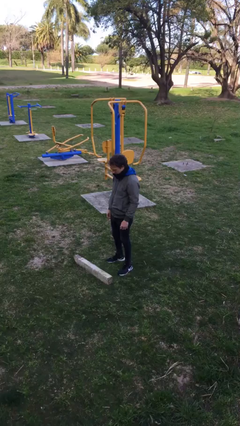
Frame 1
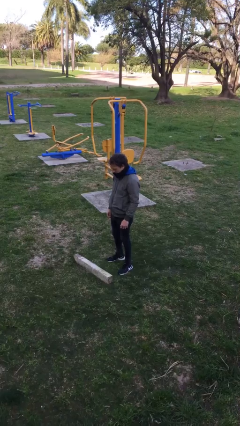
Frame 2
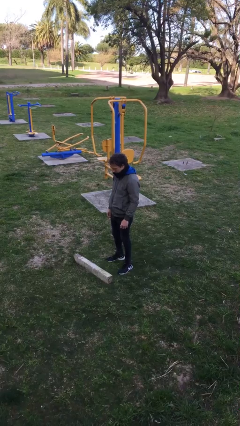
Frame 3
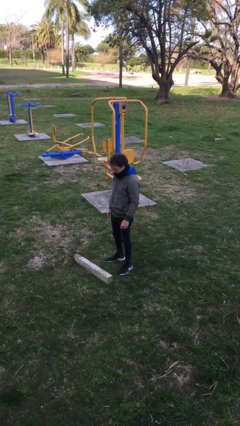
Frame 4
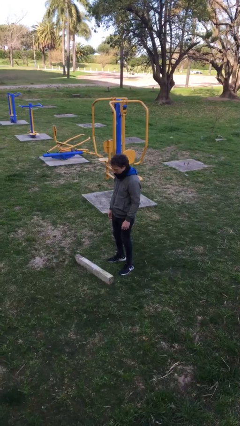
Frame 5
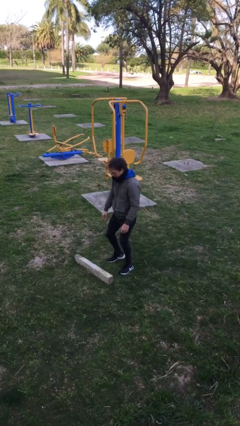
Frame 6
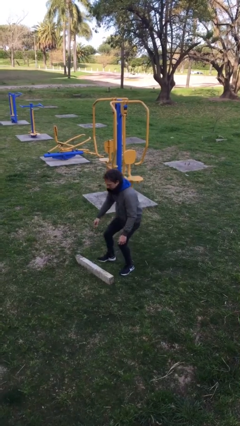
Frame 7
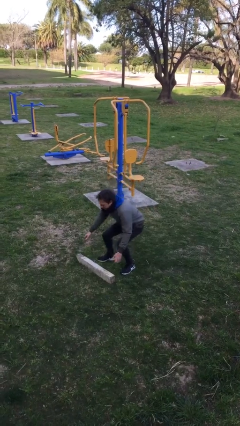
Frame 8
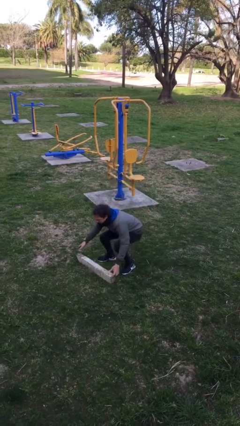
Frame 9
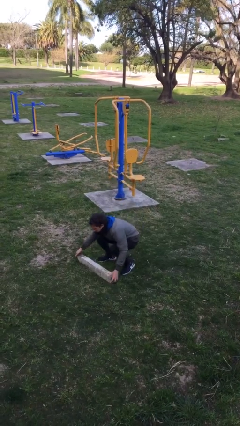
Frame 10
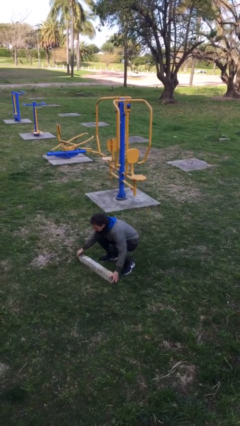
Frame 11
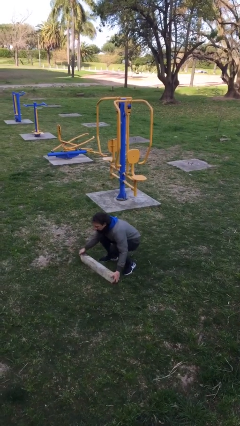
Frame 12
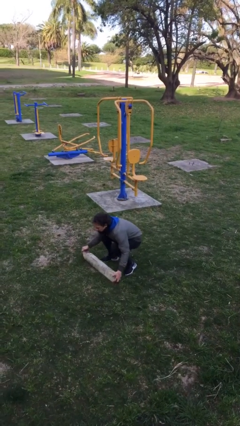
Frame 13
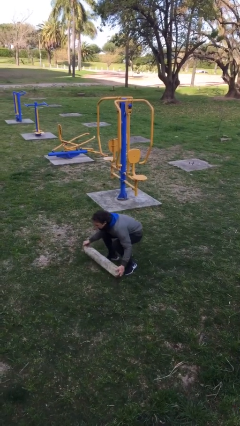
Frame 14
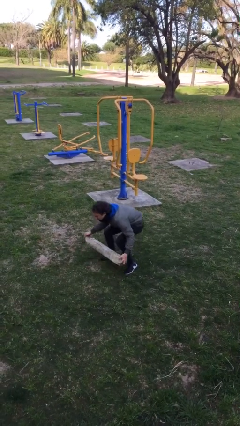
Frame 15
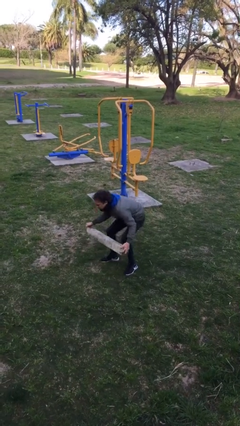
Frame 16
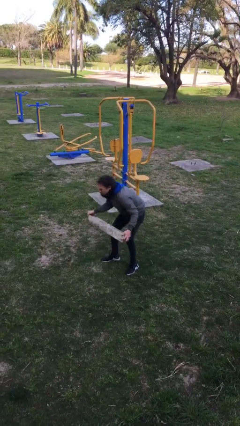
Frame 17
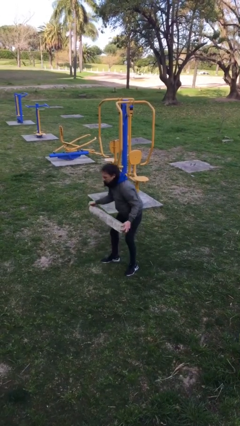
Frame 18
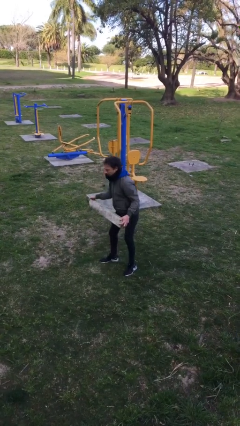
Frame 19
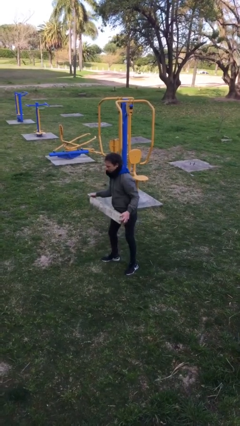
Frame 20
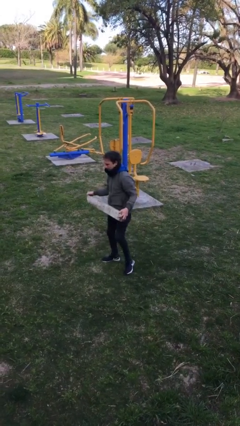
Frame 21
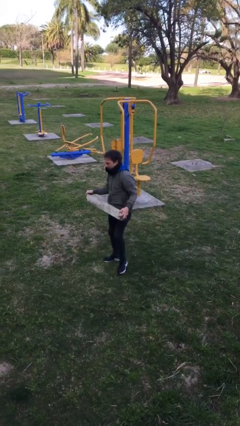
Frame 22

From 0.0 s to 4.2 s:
person picks up object from floor

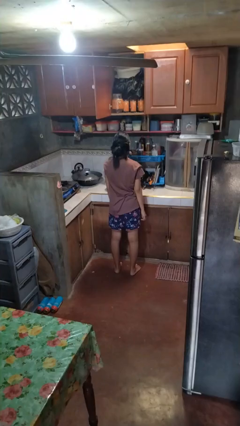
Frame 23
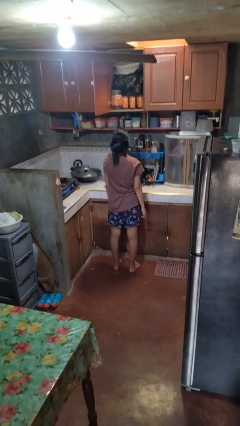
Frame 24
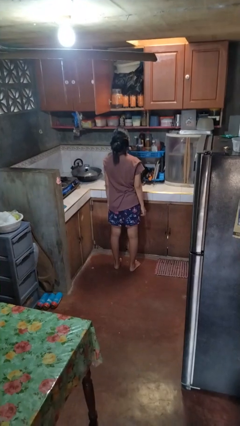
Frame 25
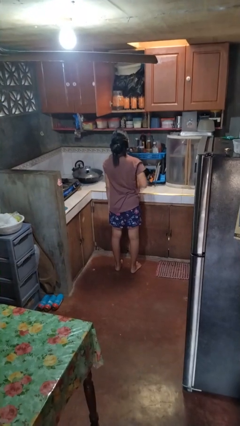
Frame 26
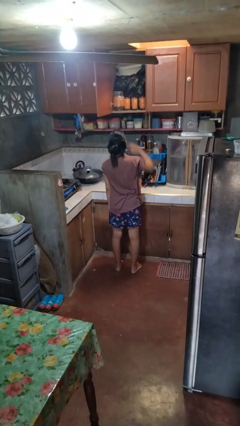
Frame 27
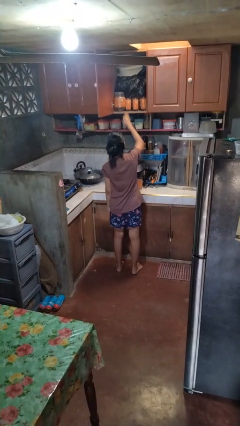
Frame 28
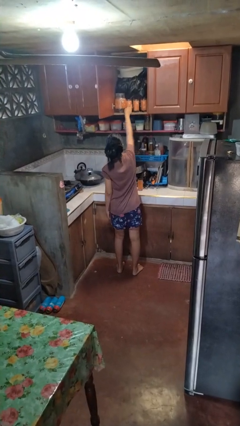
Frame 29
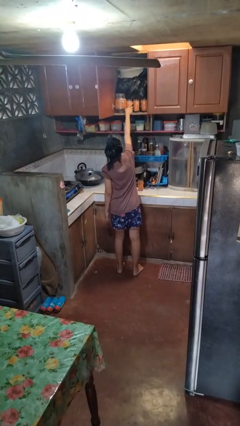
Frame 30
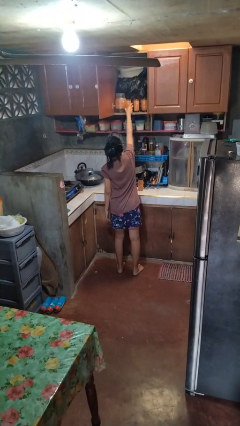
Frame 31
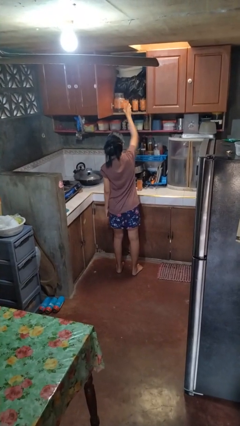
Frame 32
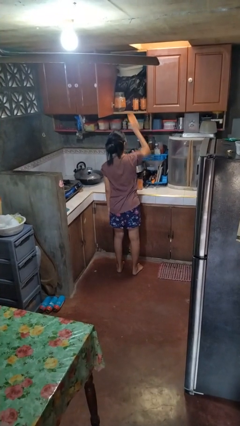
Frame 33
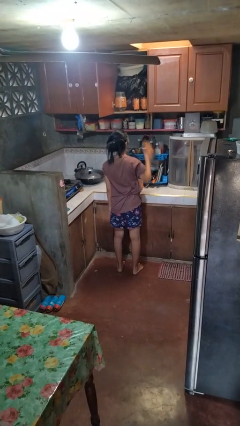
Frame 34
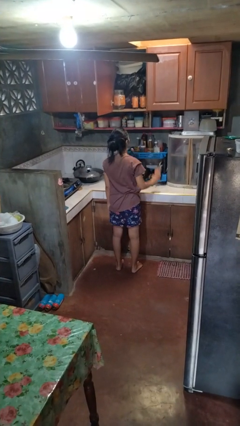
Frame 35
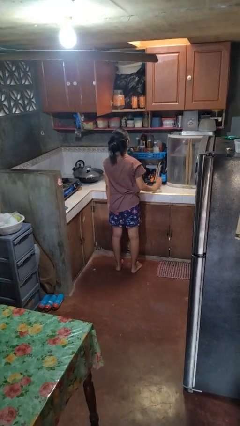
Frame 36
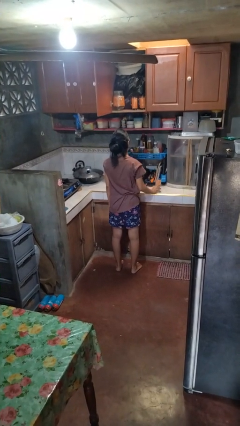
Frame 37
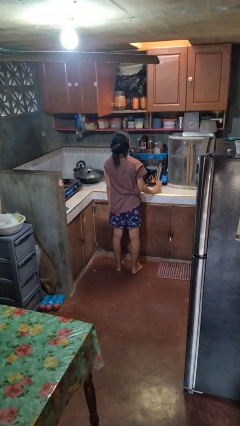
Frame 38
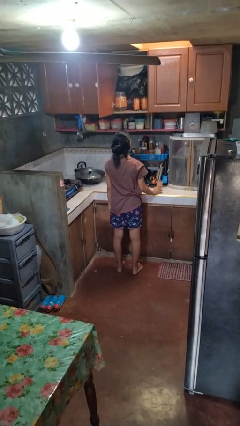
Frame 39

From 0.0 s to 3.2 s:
person takes object from cabinet

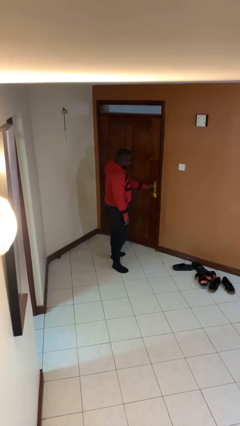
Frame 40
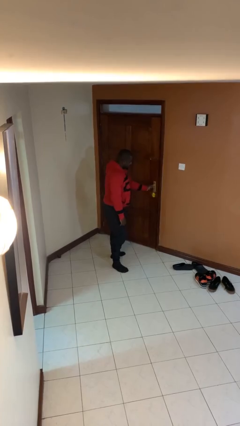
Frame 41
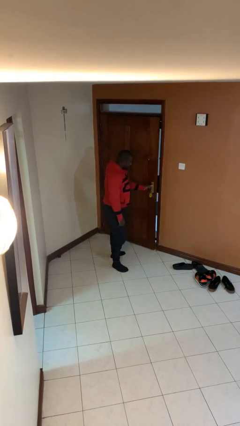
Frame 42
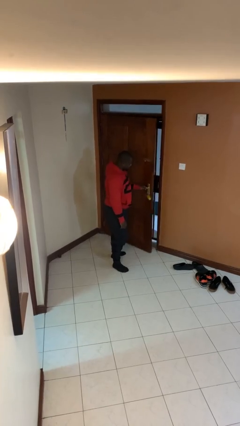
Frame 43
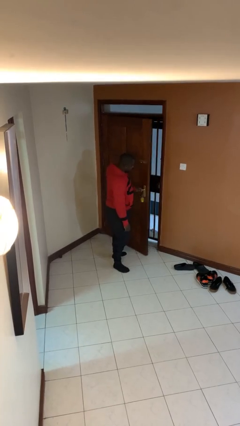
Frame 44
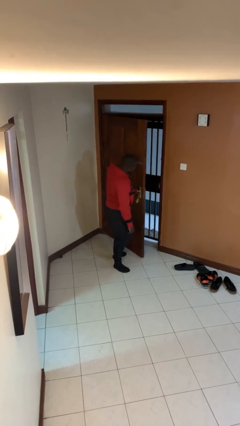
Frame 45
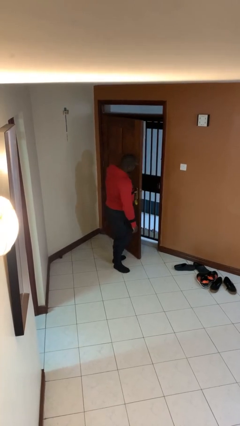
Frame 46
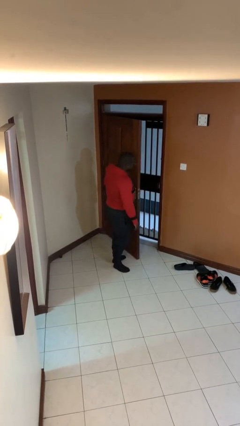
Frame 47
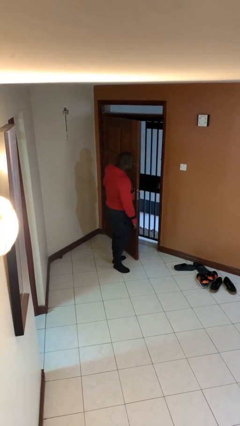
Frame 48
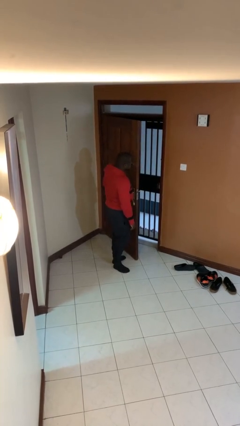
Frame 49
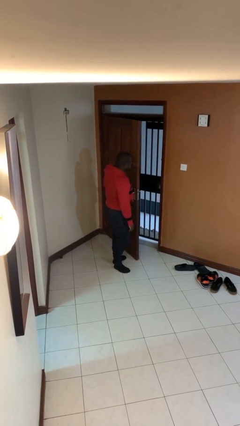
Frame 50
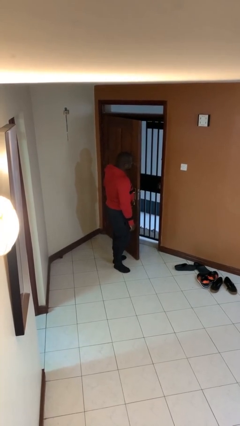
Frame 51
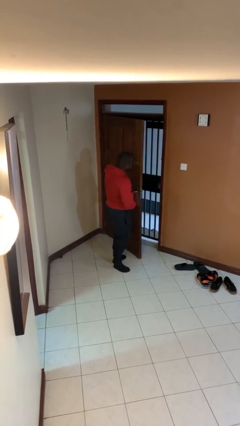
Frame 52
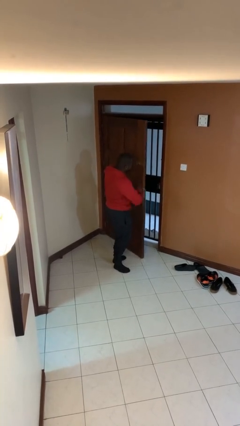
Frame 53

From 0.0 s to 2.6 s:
person opens facility door

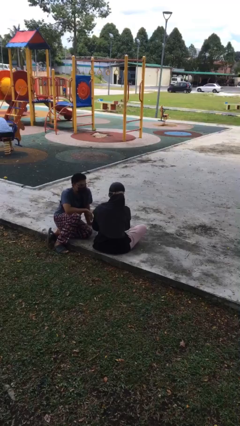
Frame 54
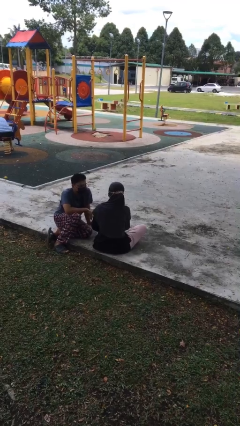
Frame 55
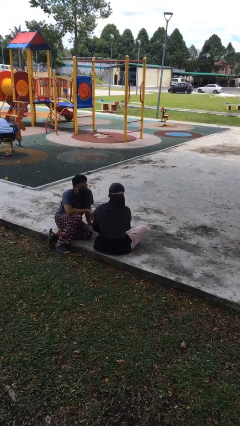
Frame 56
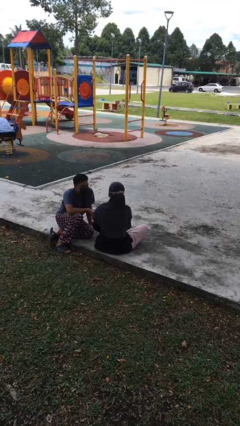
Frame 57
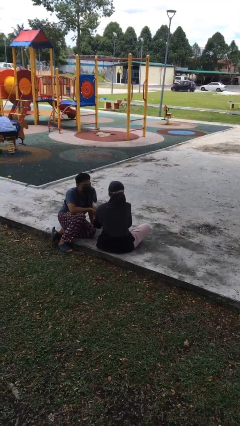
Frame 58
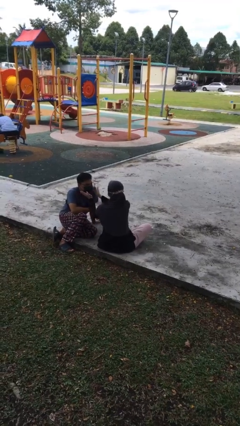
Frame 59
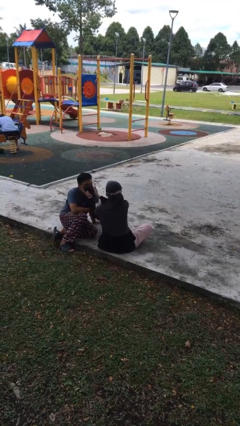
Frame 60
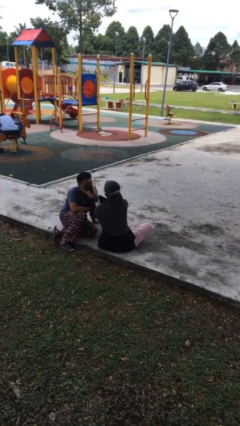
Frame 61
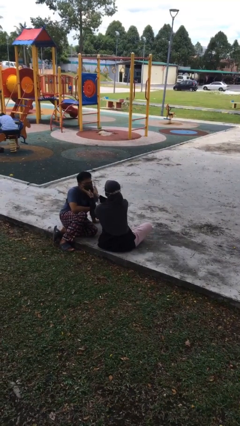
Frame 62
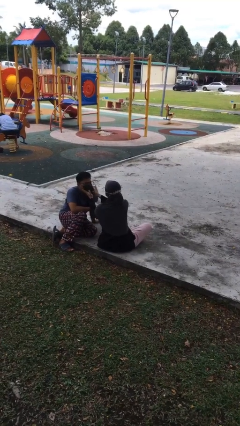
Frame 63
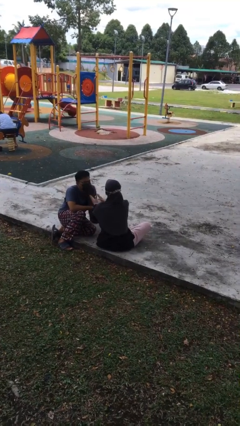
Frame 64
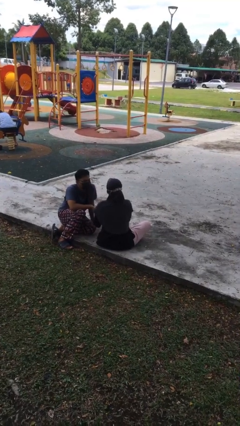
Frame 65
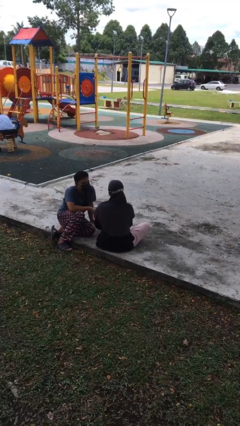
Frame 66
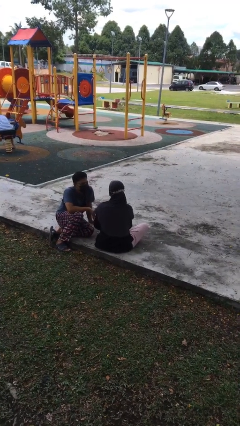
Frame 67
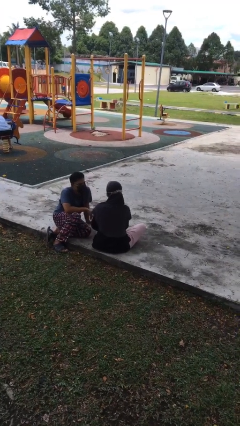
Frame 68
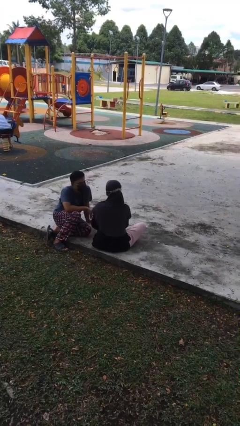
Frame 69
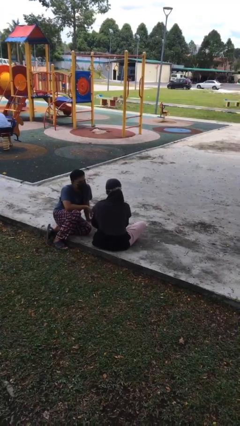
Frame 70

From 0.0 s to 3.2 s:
person touches face of person

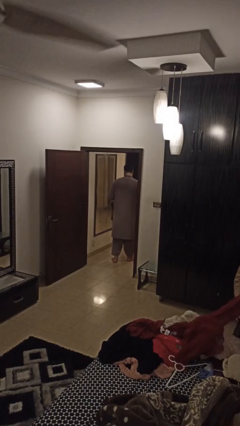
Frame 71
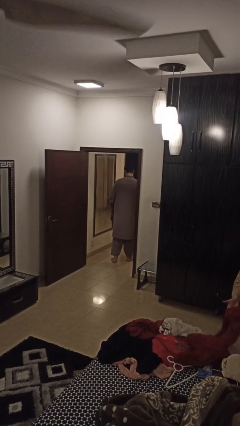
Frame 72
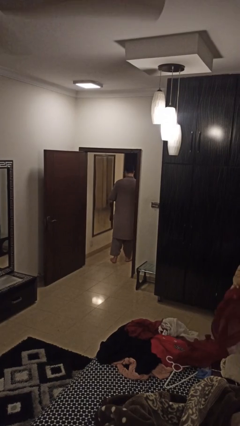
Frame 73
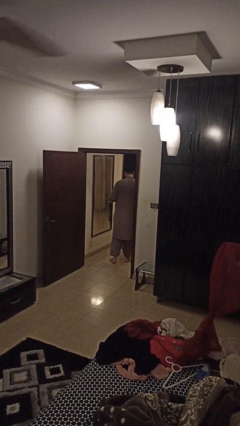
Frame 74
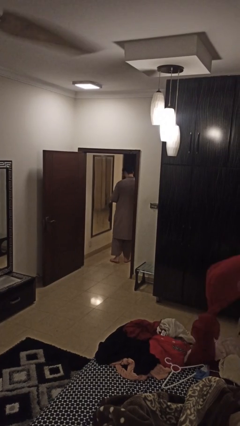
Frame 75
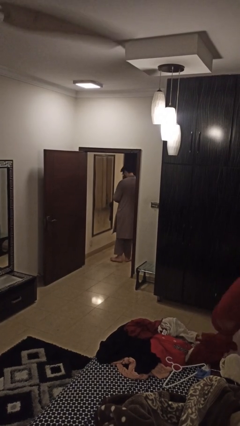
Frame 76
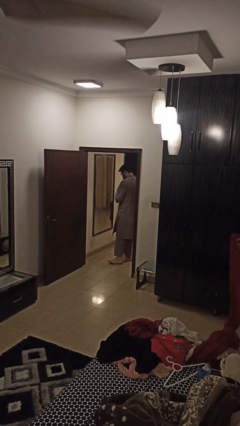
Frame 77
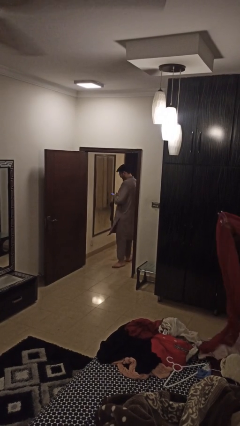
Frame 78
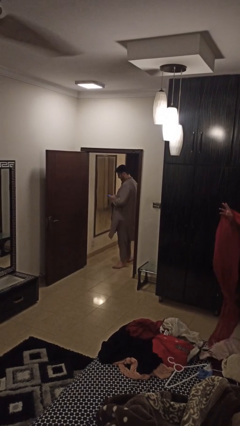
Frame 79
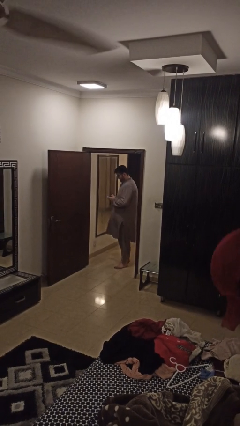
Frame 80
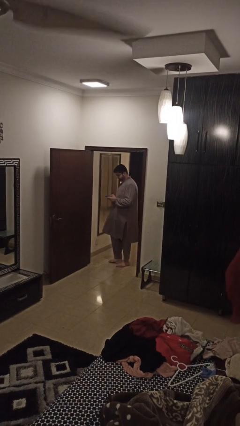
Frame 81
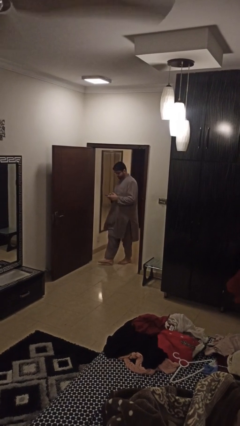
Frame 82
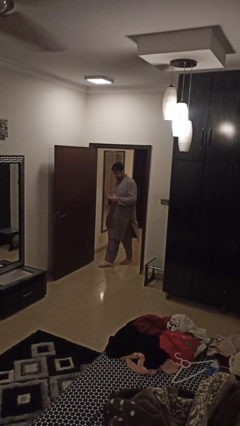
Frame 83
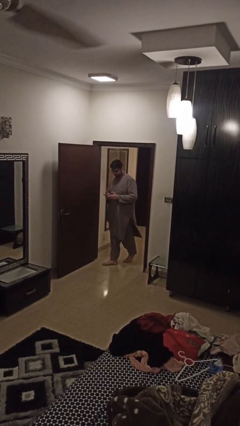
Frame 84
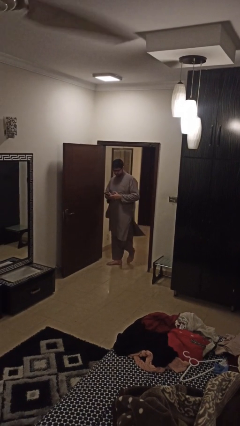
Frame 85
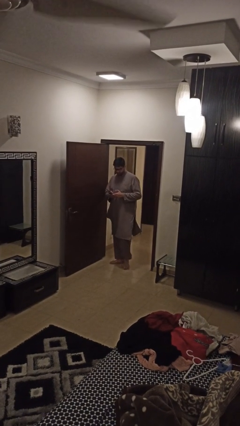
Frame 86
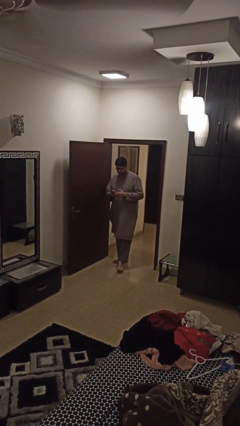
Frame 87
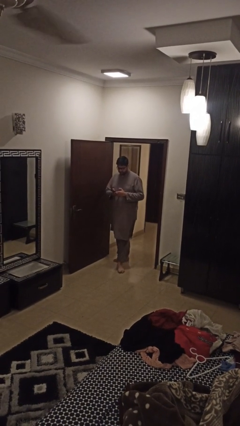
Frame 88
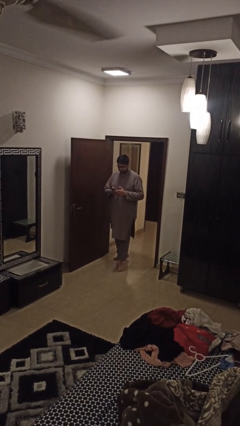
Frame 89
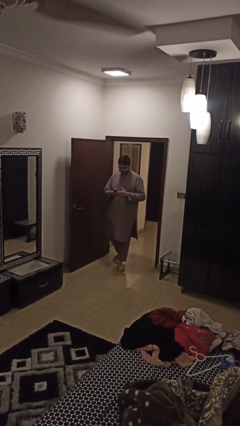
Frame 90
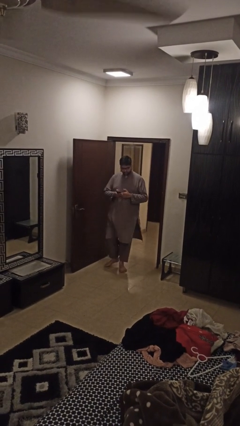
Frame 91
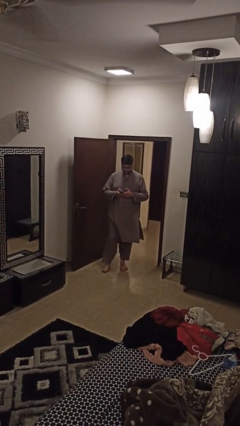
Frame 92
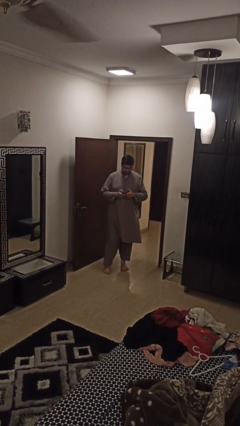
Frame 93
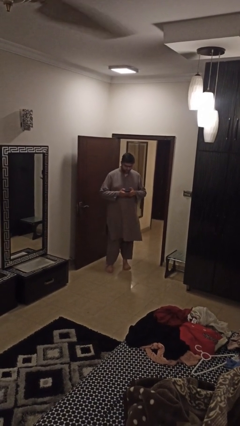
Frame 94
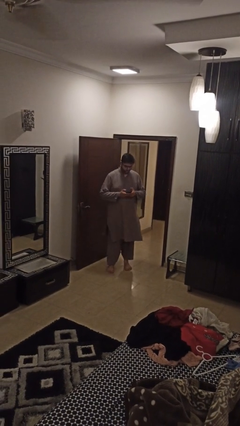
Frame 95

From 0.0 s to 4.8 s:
person enters scene through structure
